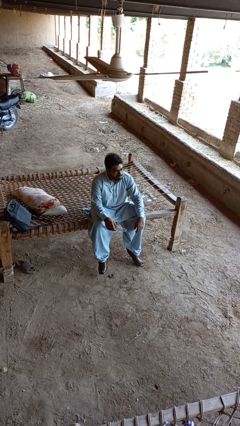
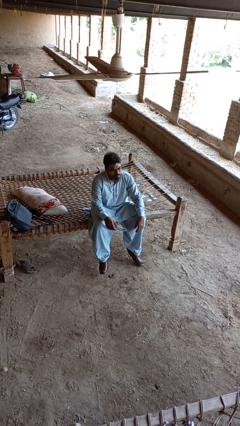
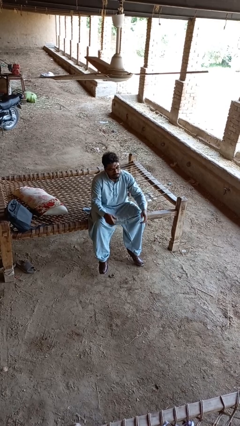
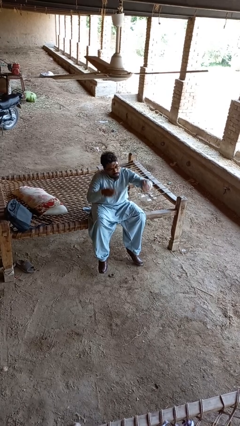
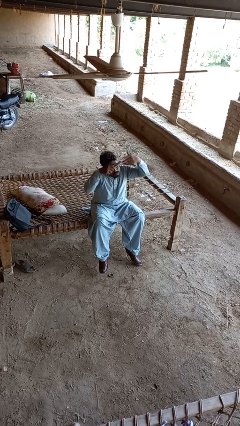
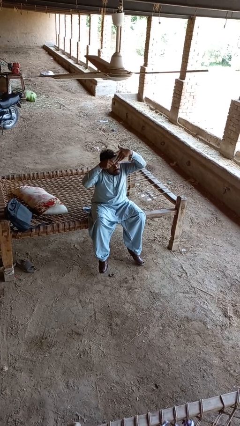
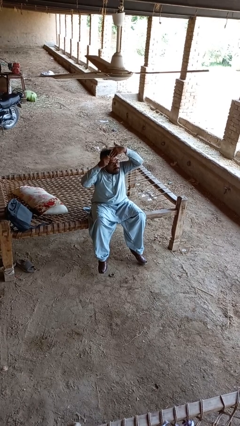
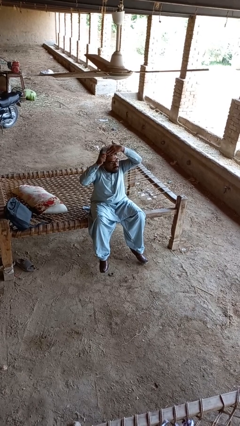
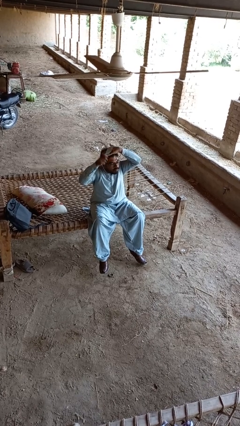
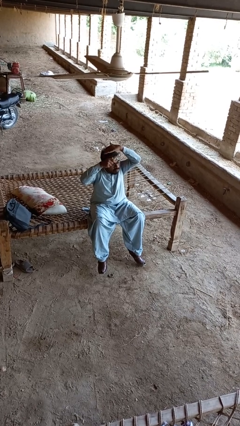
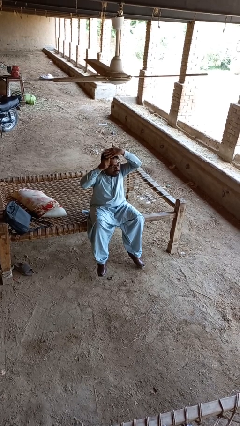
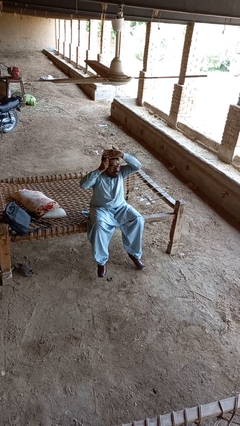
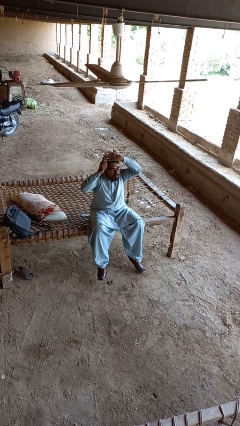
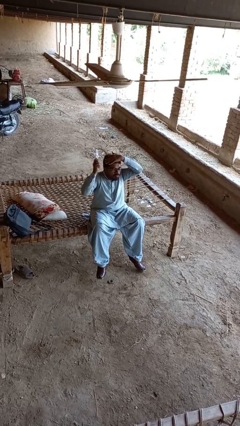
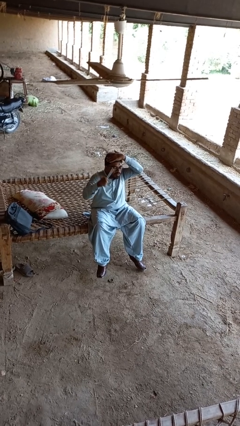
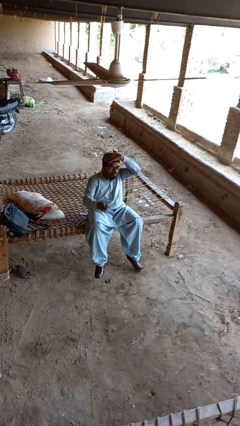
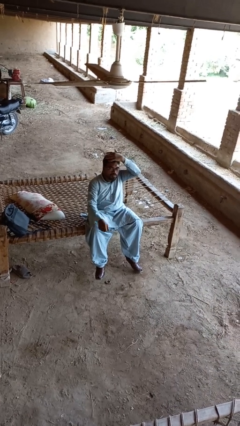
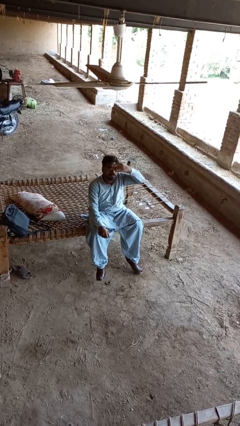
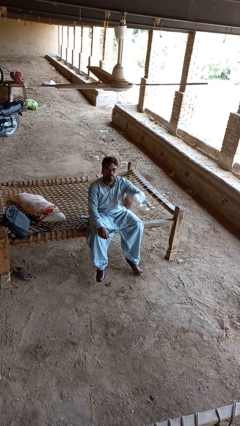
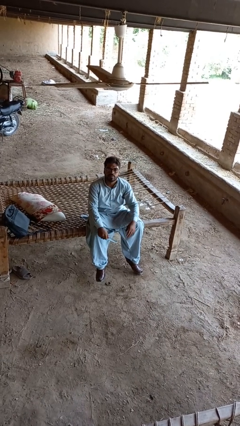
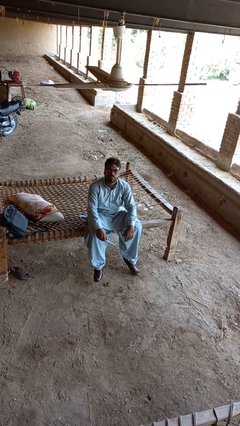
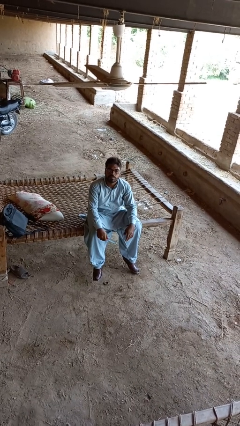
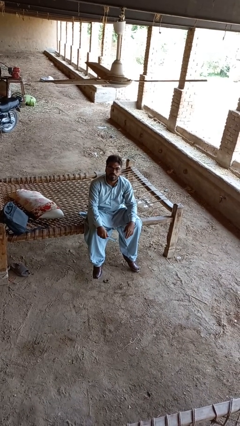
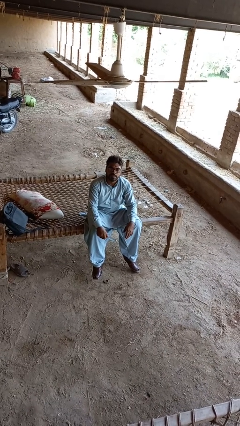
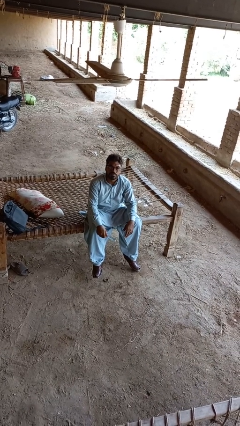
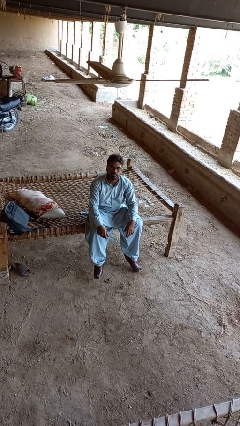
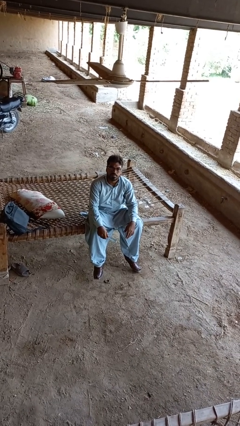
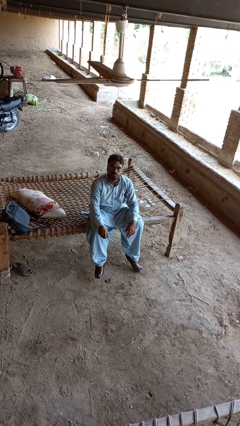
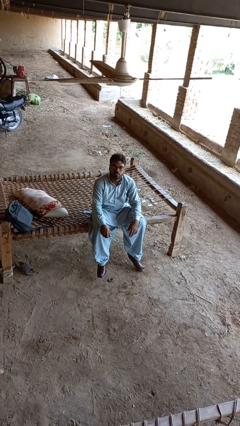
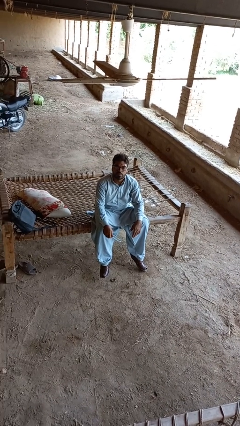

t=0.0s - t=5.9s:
person brushes hair

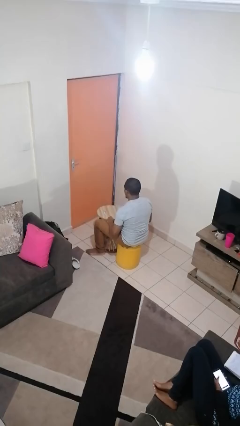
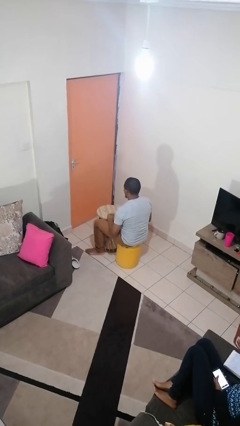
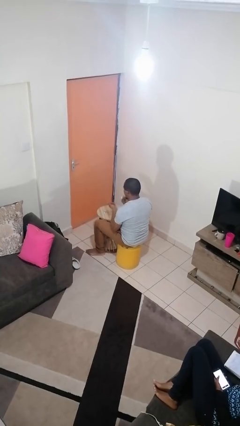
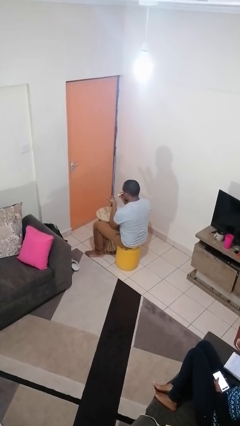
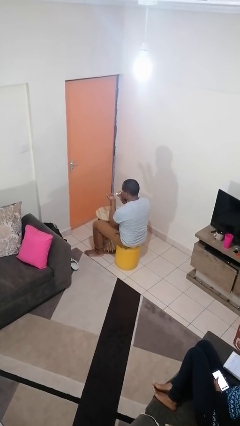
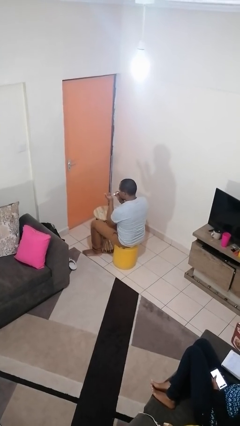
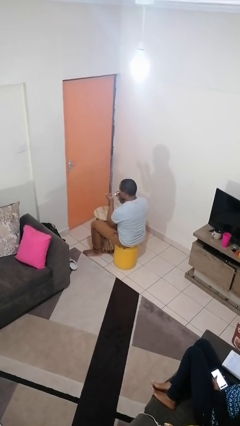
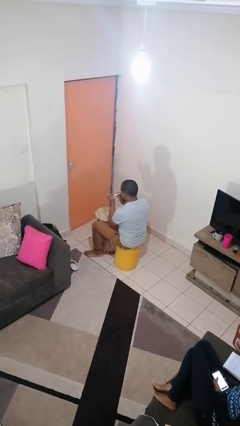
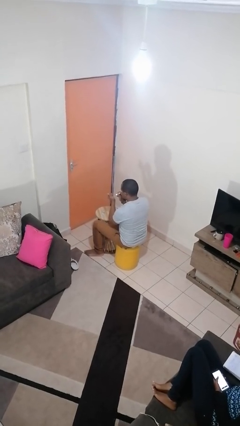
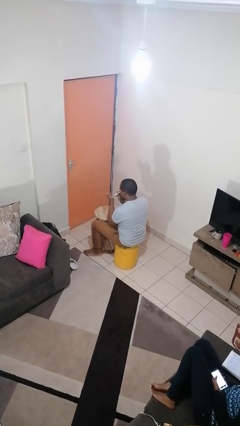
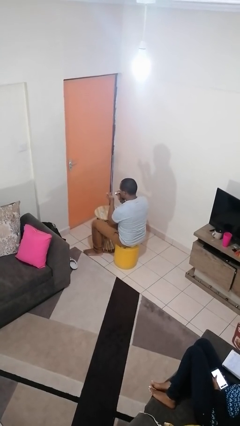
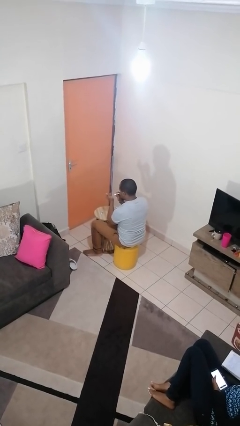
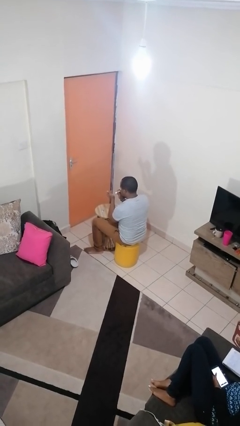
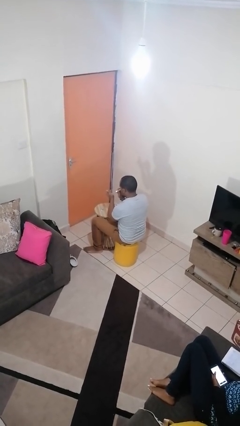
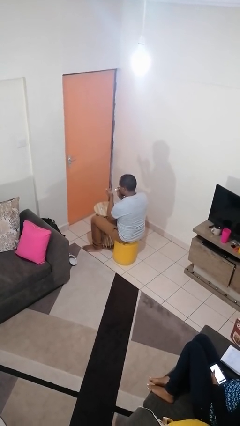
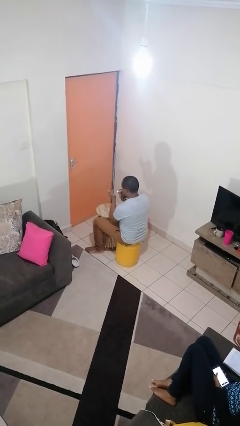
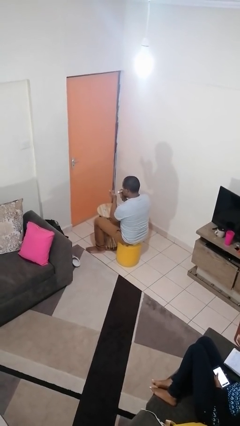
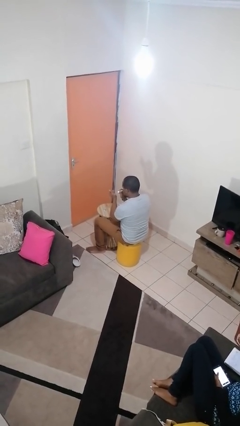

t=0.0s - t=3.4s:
person paints fingernails

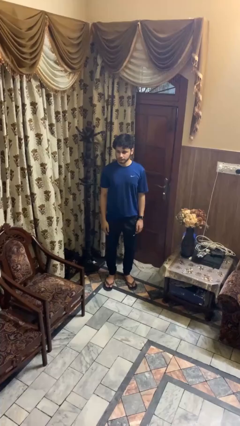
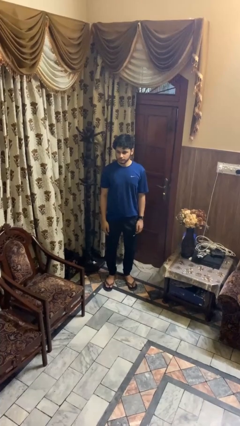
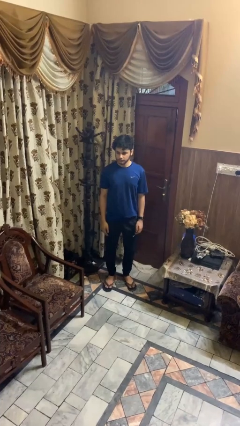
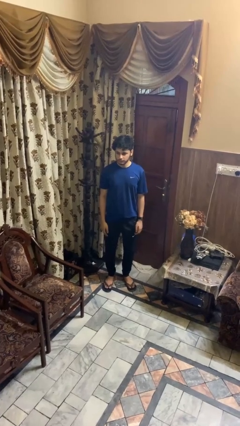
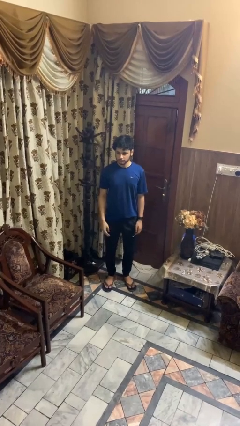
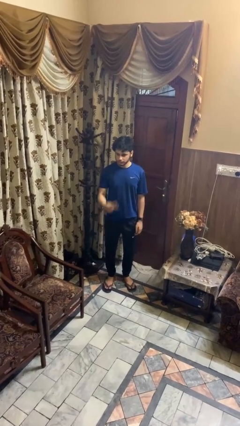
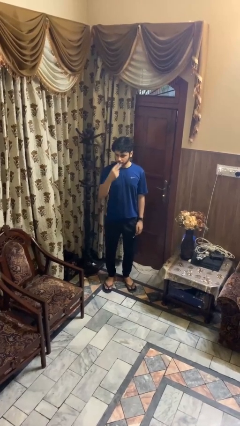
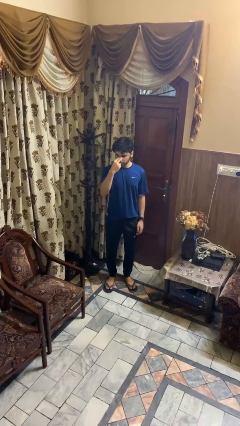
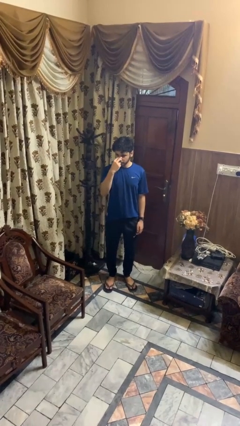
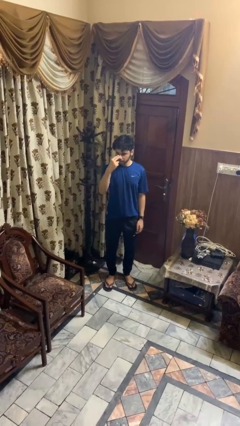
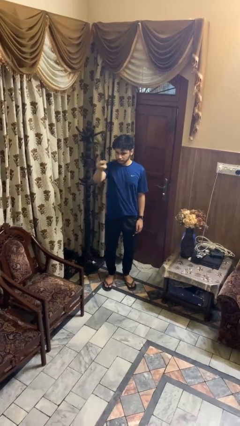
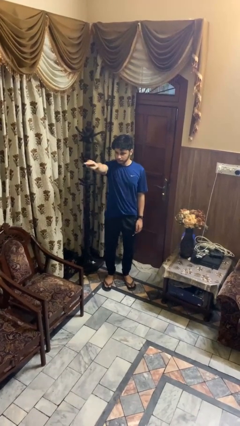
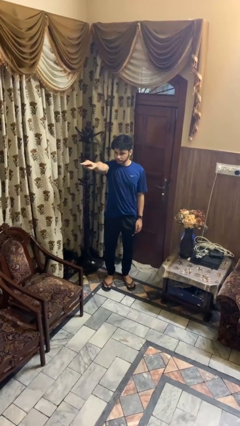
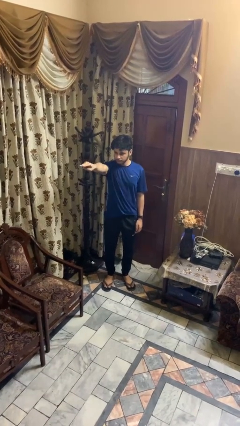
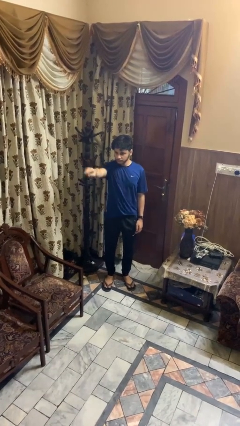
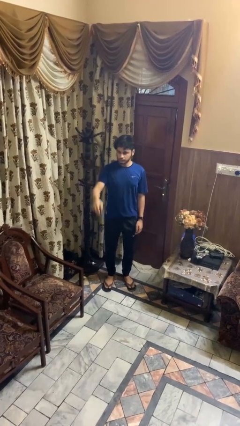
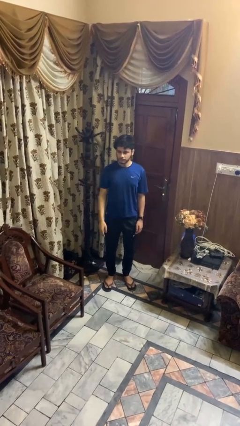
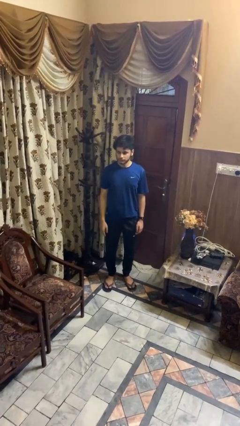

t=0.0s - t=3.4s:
person gestures watch closely

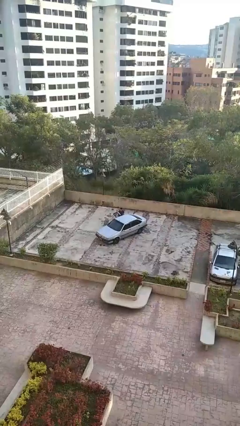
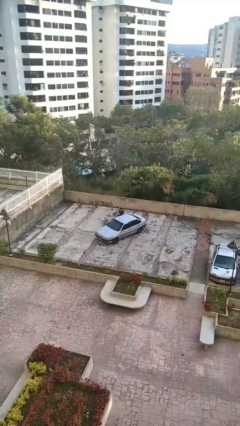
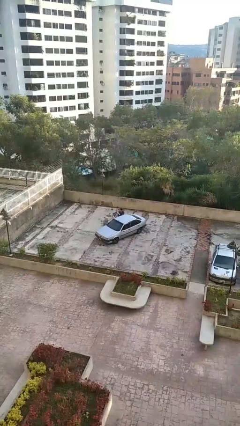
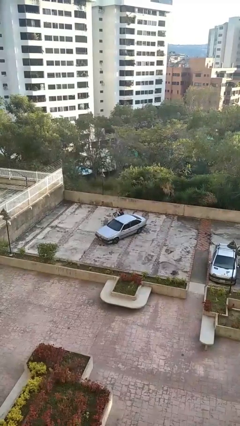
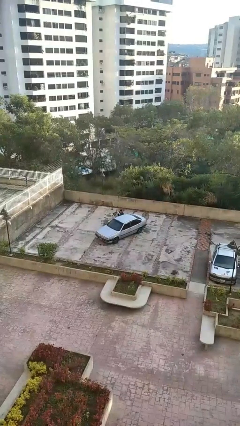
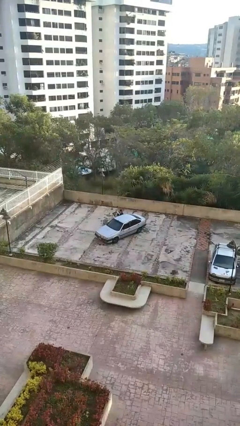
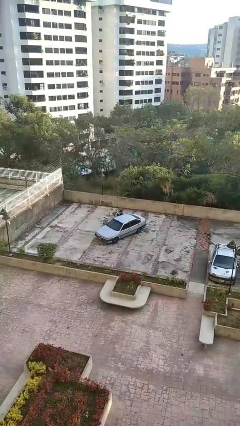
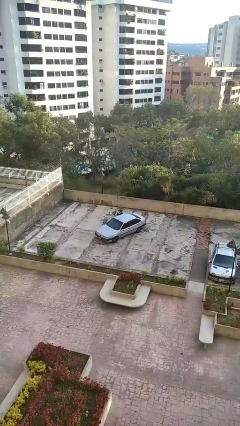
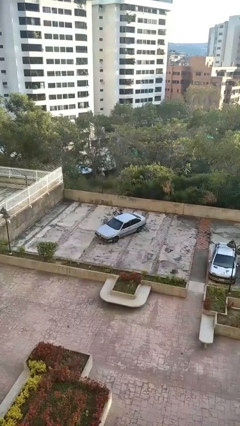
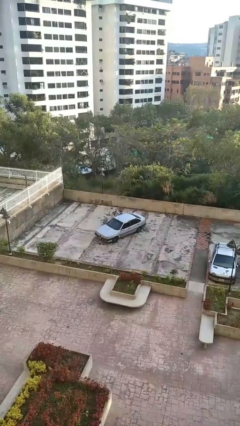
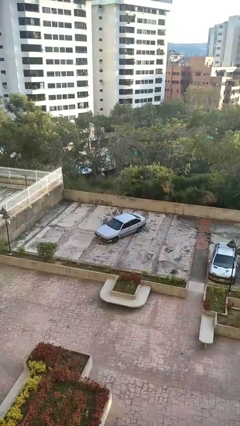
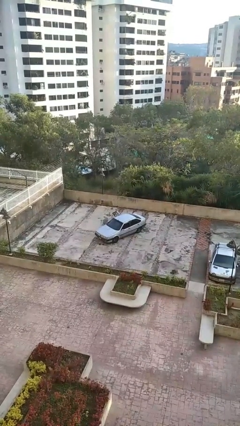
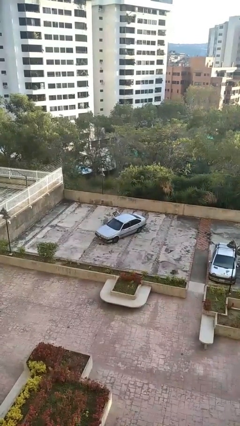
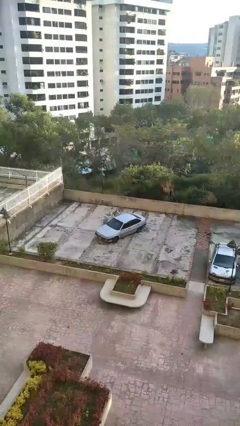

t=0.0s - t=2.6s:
person enters car

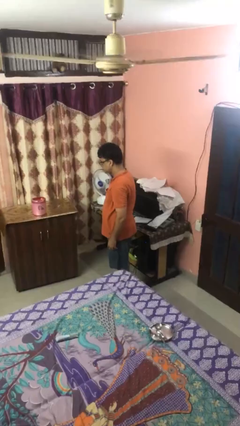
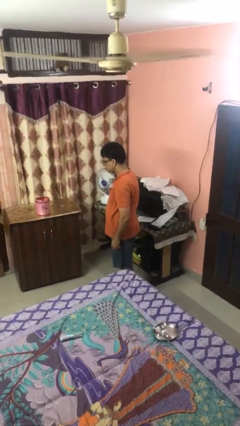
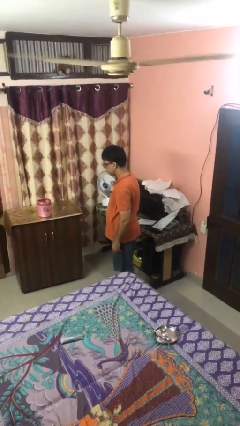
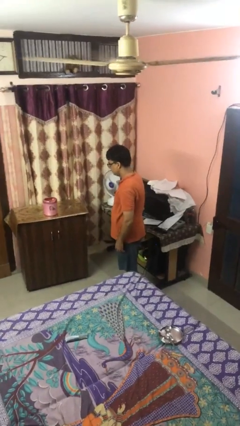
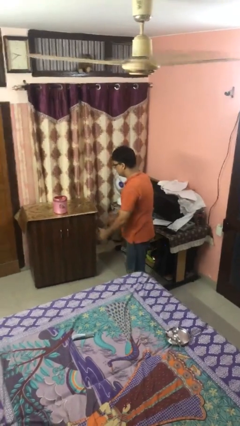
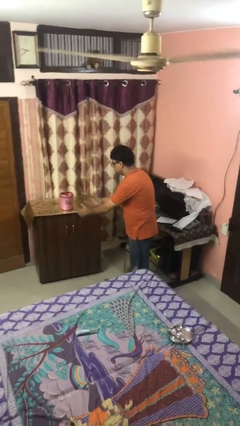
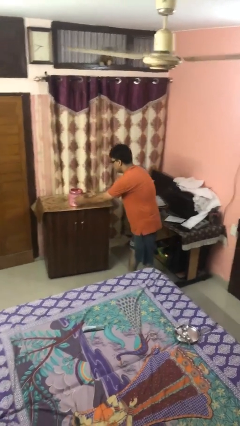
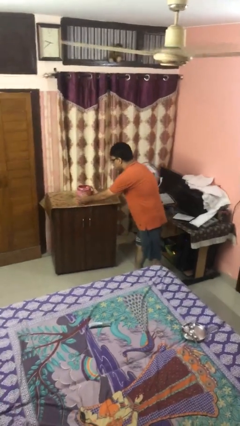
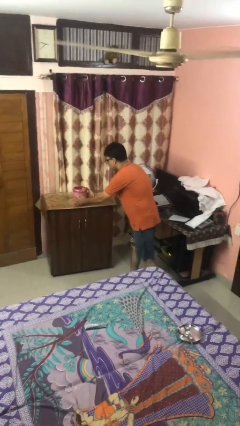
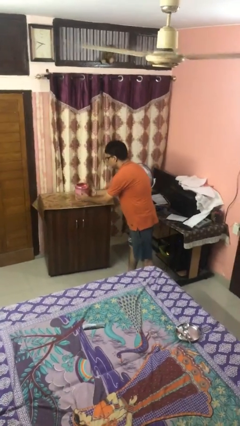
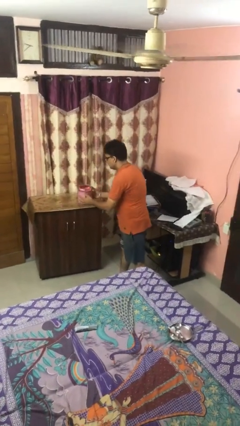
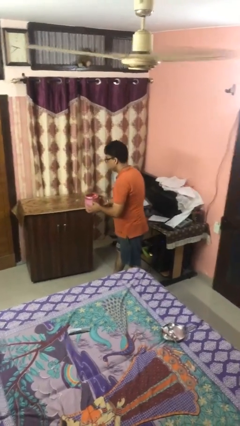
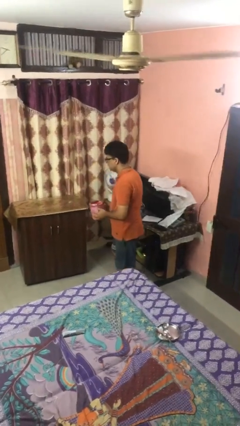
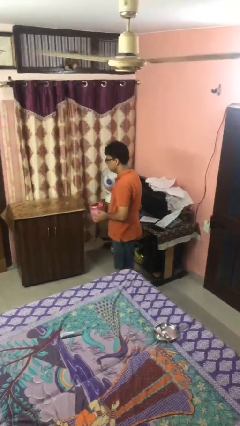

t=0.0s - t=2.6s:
person picks up object from countertop
